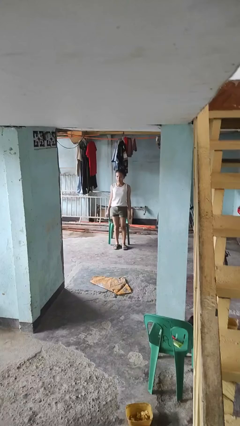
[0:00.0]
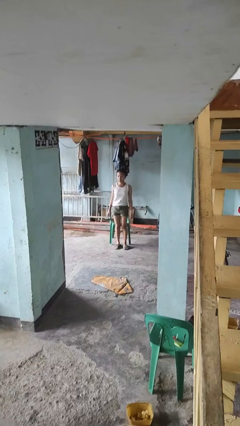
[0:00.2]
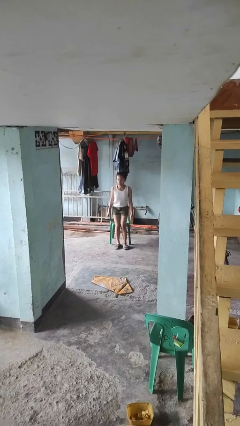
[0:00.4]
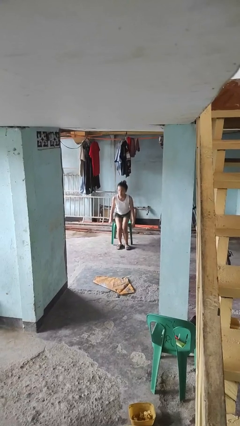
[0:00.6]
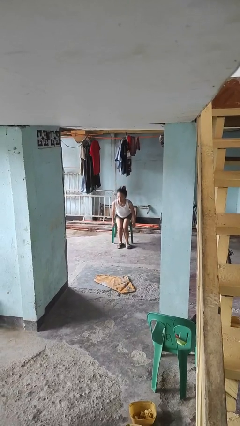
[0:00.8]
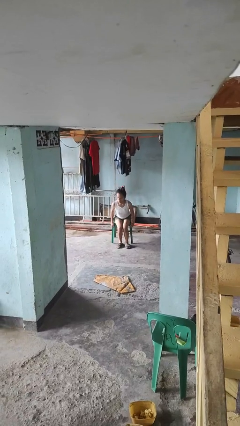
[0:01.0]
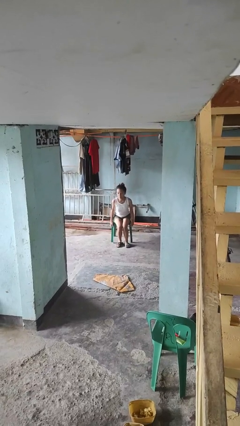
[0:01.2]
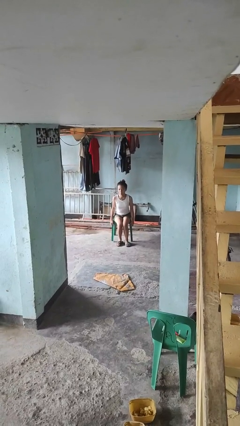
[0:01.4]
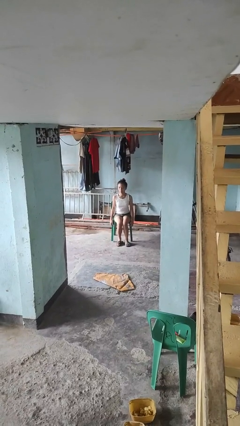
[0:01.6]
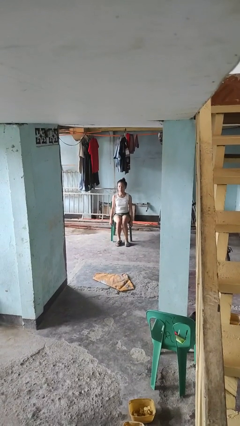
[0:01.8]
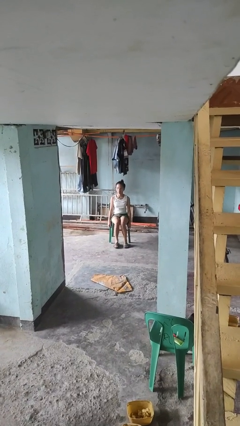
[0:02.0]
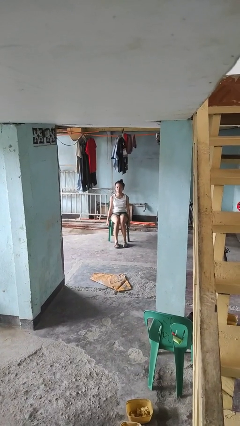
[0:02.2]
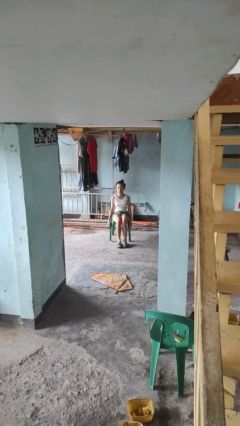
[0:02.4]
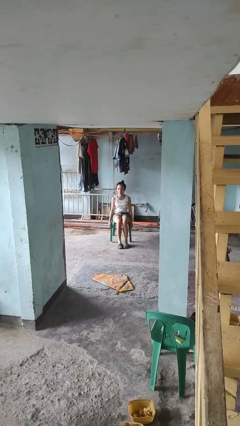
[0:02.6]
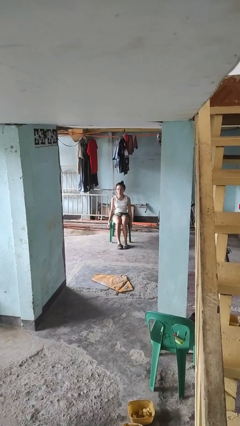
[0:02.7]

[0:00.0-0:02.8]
person sits down

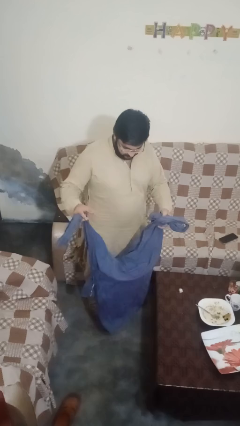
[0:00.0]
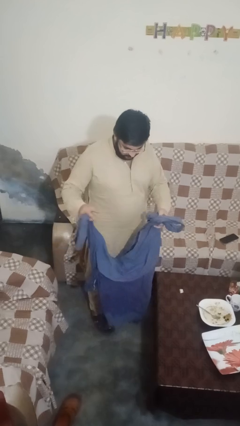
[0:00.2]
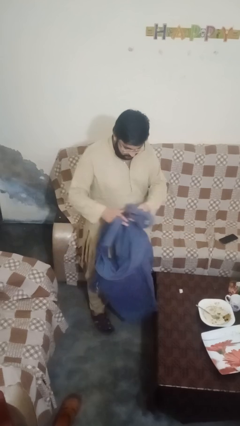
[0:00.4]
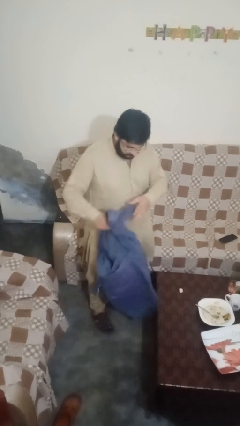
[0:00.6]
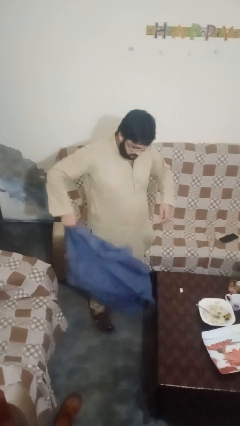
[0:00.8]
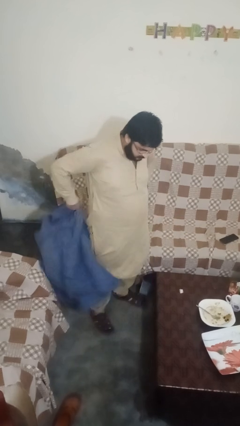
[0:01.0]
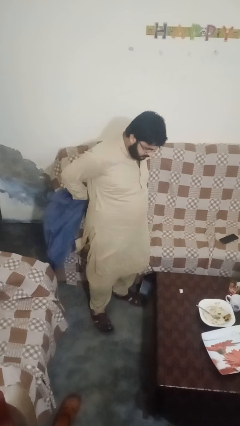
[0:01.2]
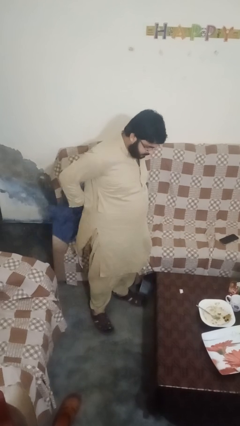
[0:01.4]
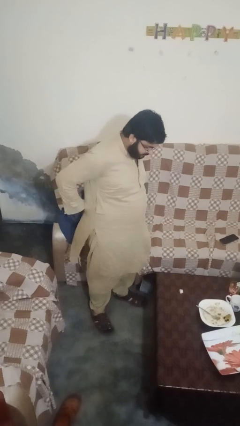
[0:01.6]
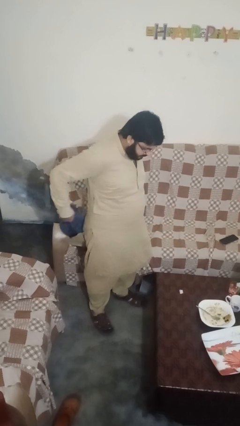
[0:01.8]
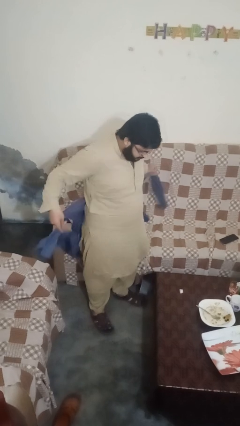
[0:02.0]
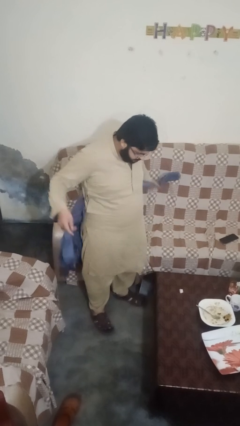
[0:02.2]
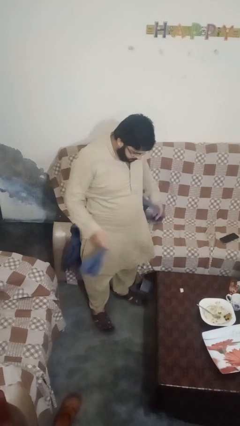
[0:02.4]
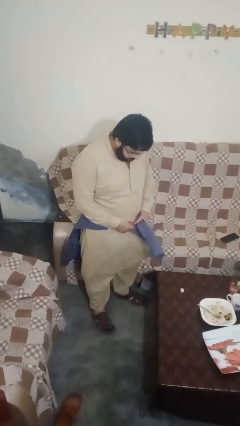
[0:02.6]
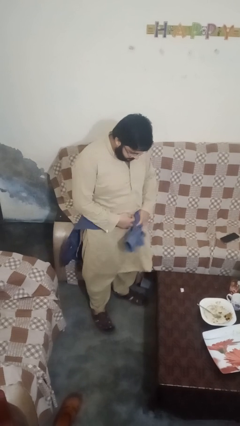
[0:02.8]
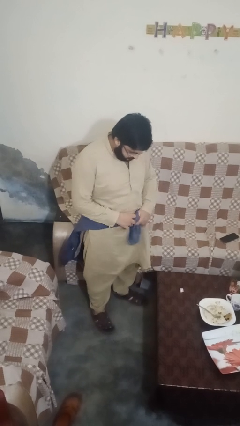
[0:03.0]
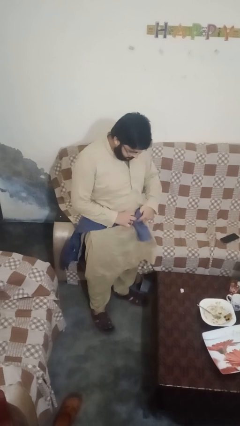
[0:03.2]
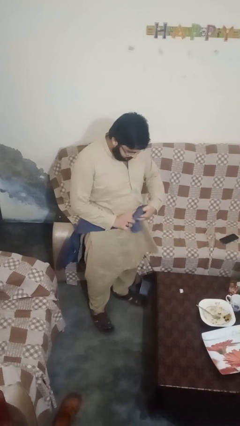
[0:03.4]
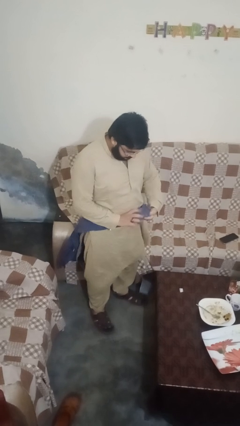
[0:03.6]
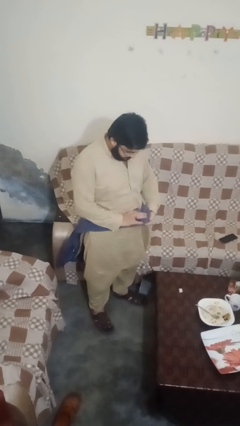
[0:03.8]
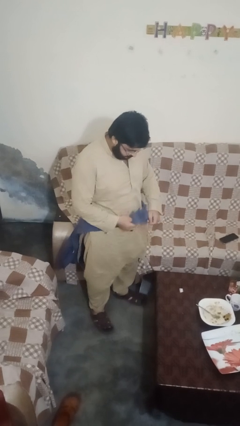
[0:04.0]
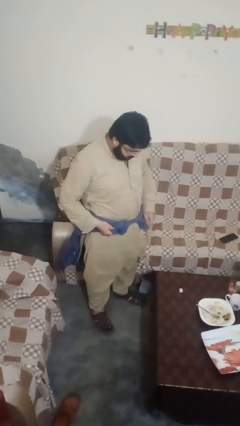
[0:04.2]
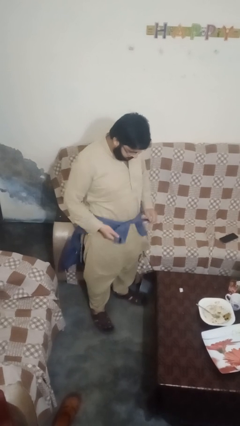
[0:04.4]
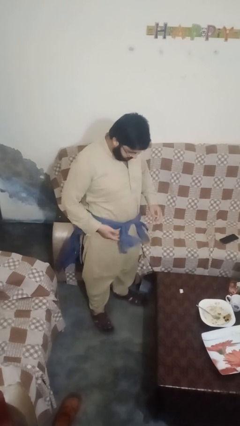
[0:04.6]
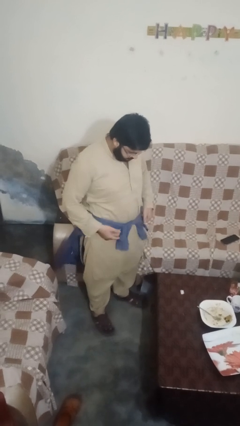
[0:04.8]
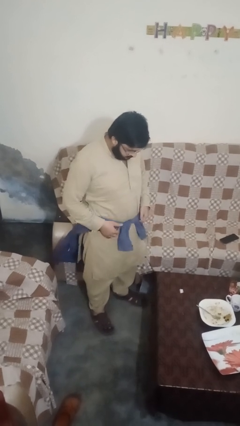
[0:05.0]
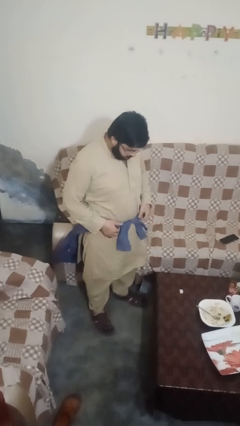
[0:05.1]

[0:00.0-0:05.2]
person ties jacket around waist

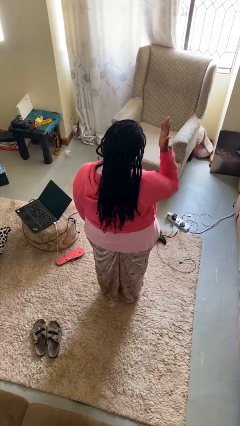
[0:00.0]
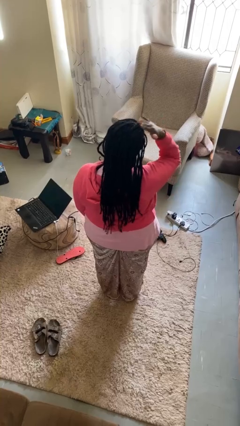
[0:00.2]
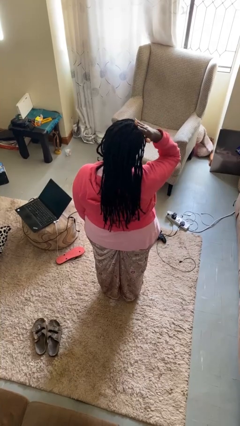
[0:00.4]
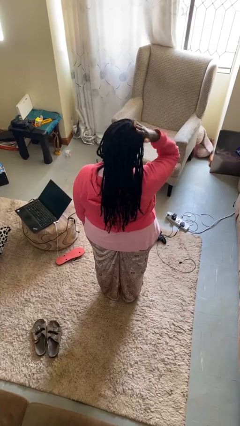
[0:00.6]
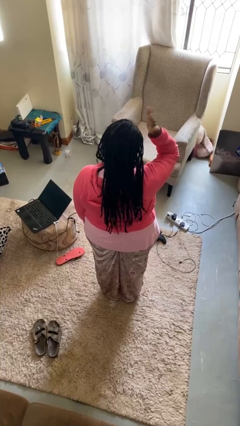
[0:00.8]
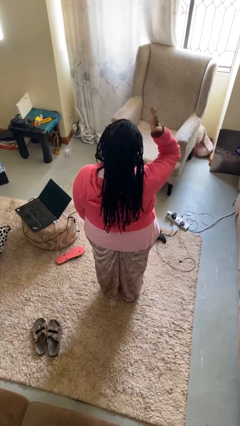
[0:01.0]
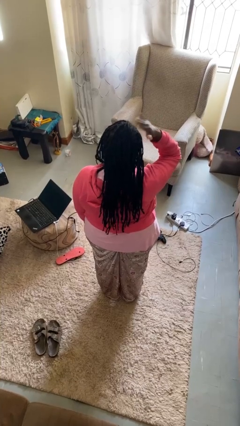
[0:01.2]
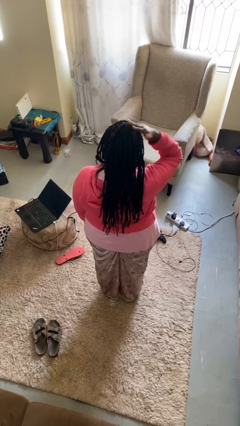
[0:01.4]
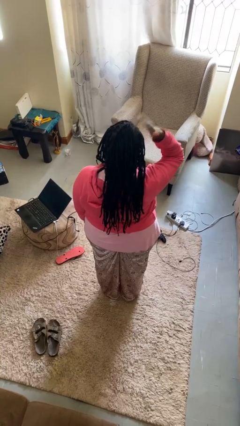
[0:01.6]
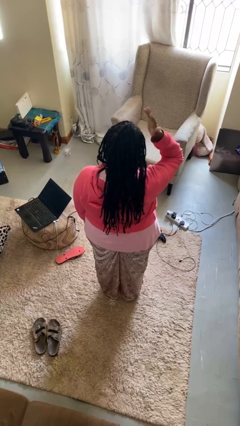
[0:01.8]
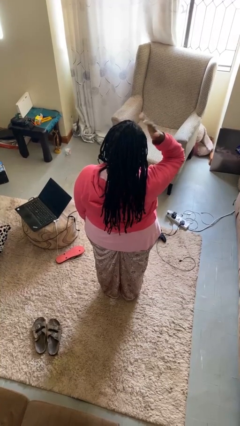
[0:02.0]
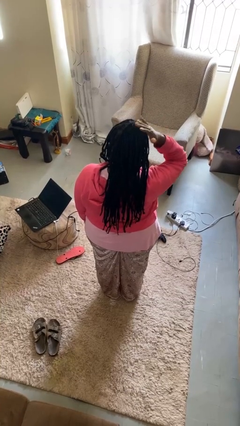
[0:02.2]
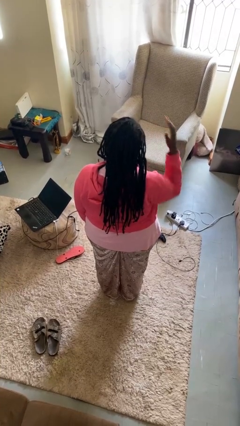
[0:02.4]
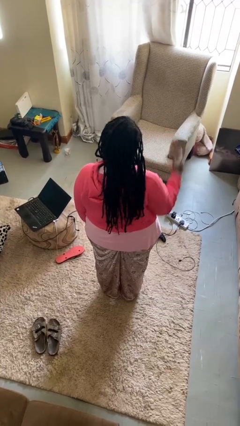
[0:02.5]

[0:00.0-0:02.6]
person pats head

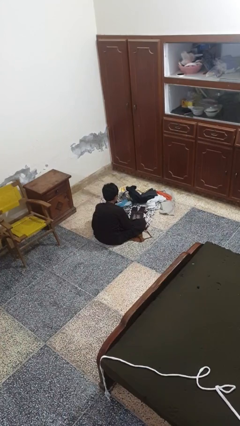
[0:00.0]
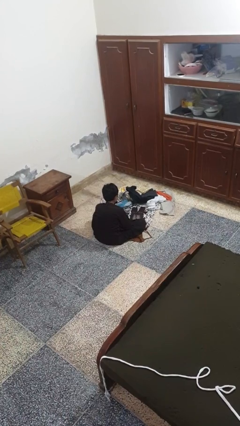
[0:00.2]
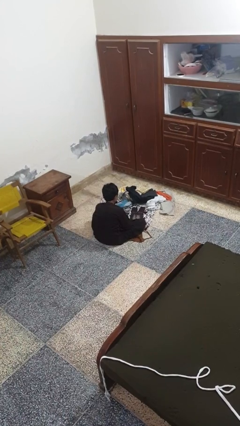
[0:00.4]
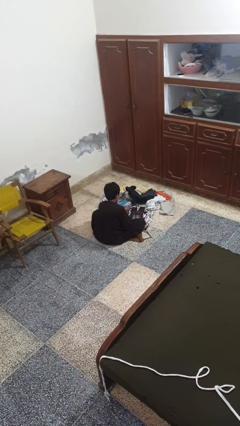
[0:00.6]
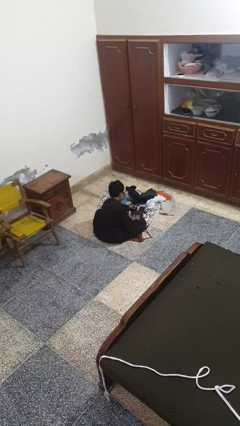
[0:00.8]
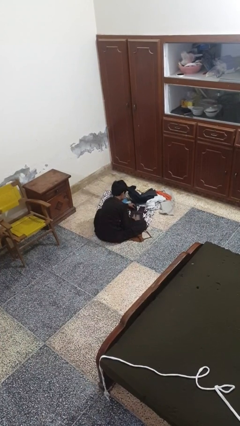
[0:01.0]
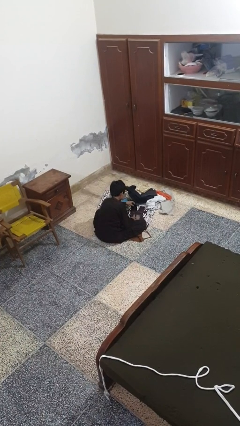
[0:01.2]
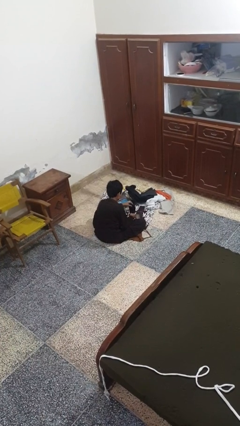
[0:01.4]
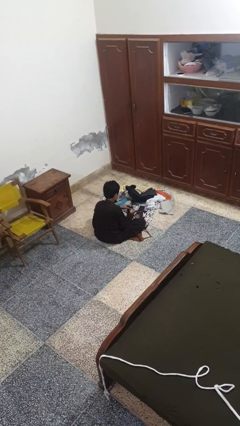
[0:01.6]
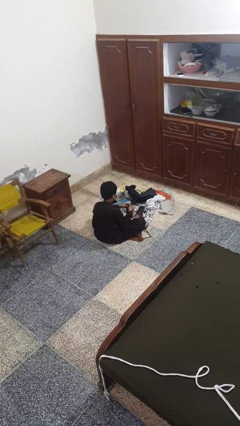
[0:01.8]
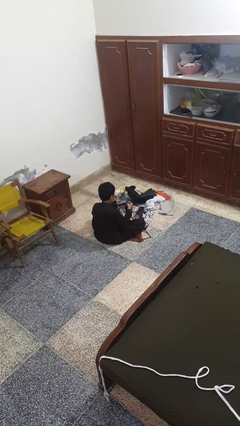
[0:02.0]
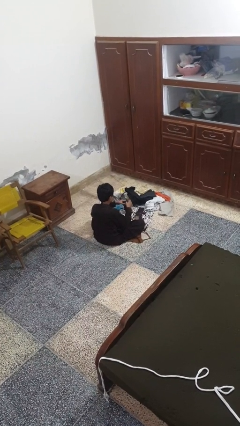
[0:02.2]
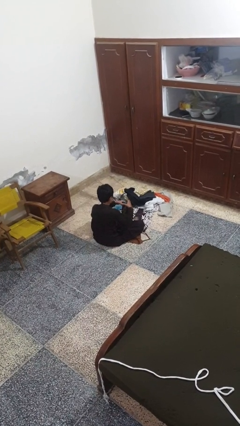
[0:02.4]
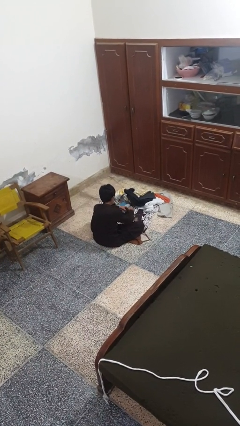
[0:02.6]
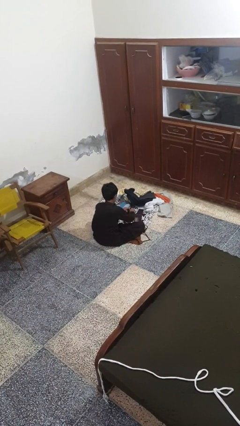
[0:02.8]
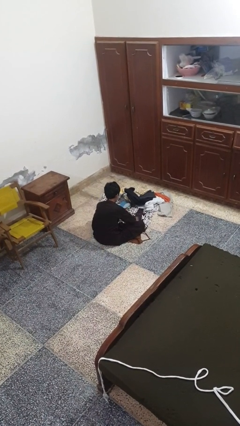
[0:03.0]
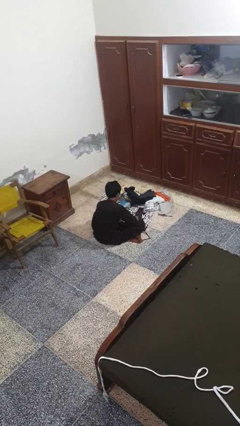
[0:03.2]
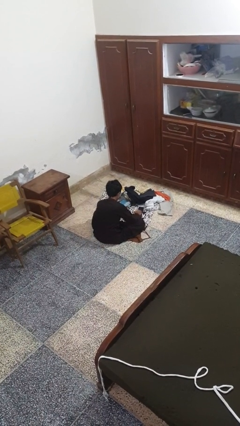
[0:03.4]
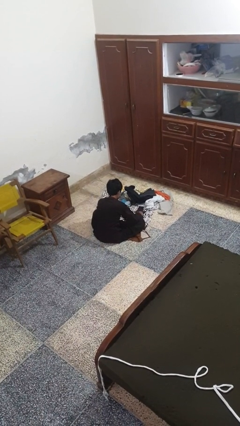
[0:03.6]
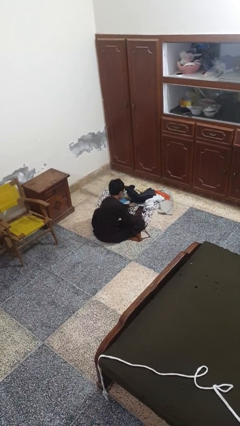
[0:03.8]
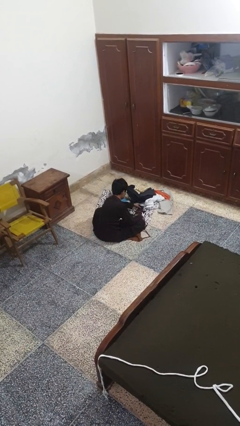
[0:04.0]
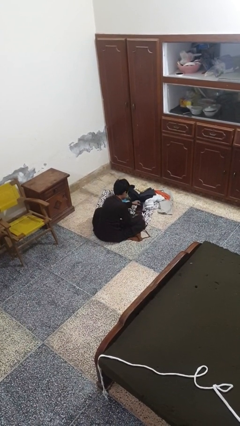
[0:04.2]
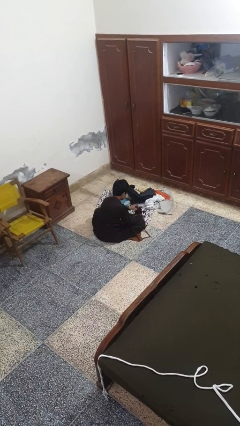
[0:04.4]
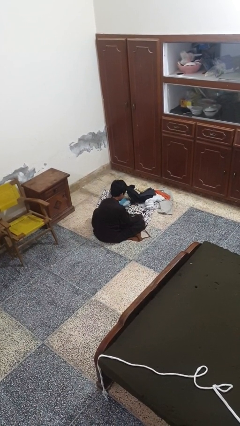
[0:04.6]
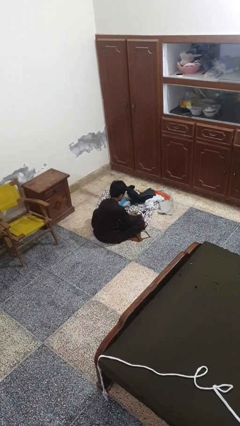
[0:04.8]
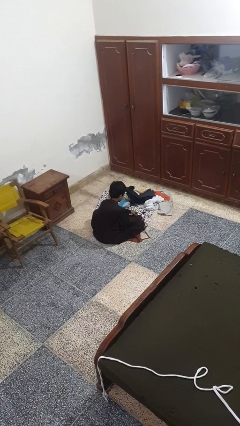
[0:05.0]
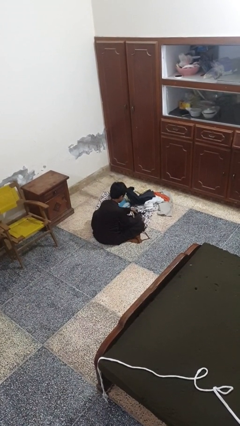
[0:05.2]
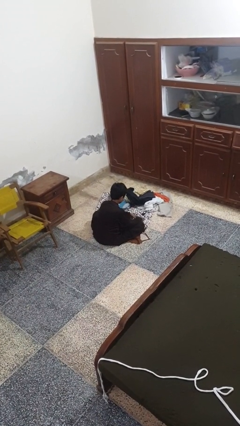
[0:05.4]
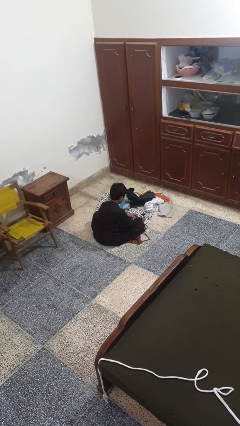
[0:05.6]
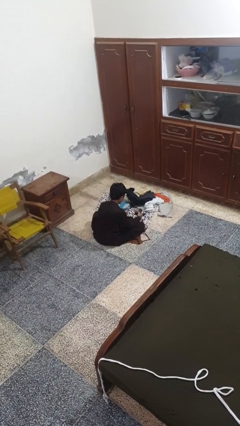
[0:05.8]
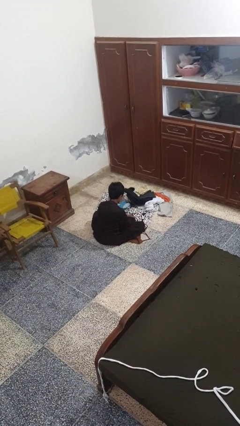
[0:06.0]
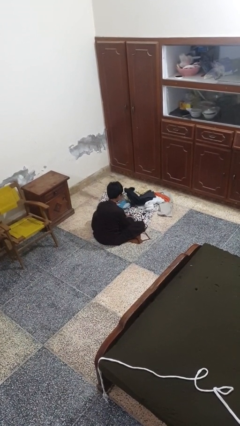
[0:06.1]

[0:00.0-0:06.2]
person folds socks

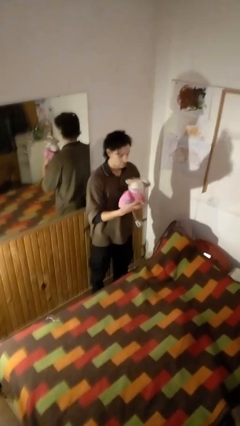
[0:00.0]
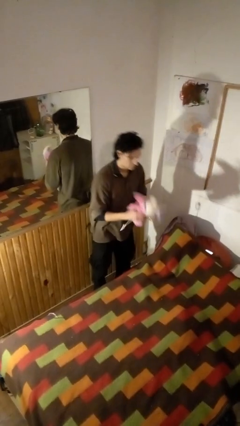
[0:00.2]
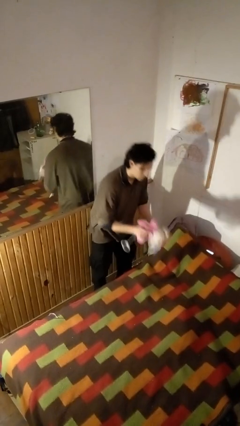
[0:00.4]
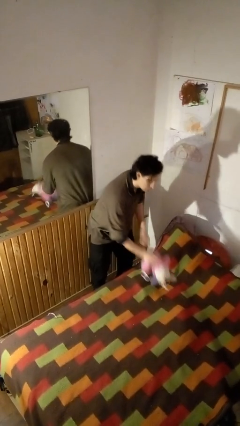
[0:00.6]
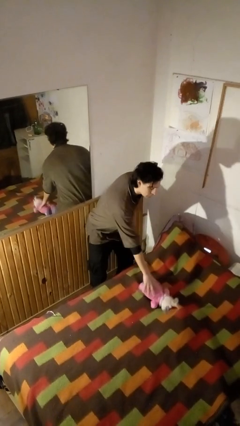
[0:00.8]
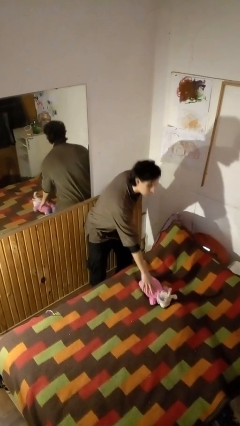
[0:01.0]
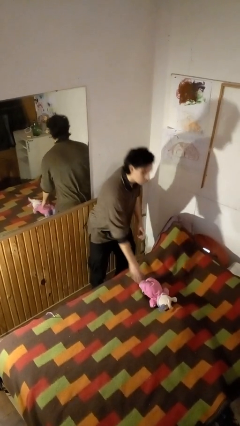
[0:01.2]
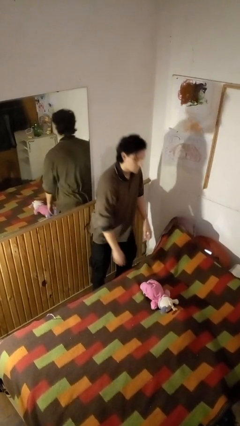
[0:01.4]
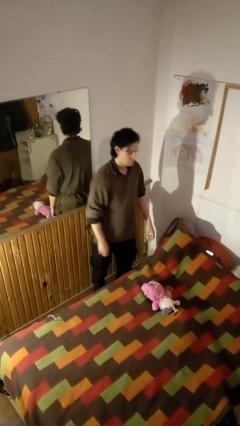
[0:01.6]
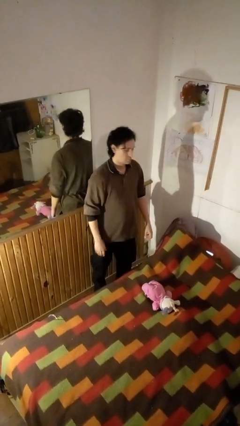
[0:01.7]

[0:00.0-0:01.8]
person puts down object on bed
